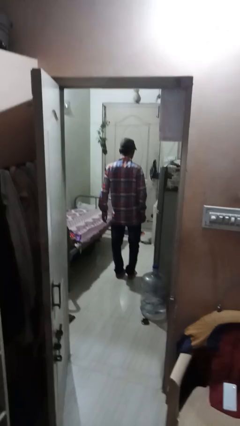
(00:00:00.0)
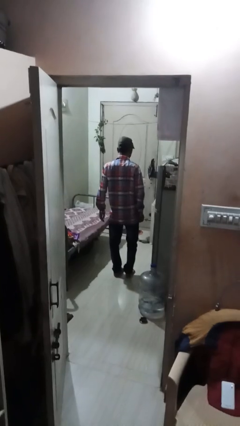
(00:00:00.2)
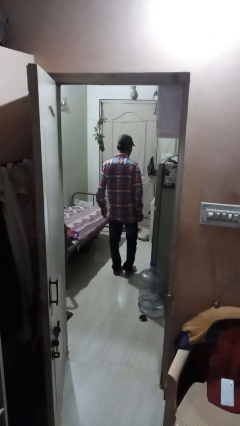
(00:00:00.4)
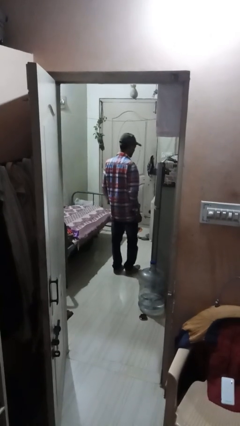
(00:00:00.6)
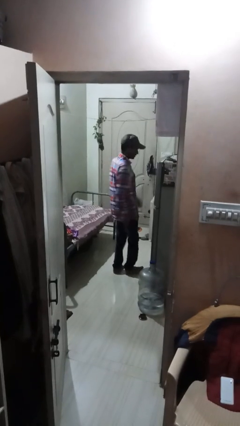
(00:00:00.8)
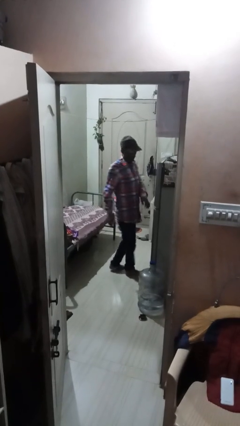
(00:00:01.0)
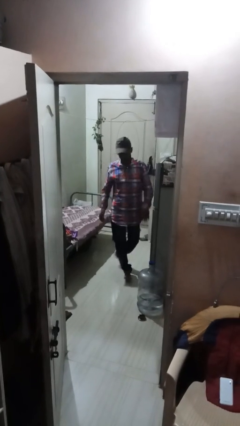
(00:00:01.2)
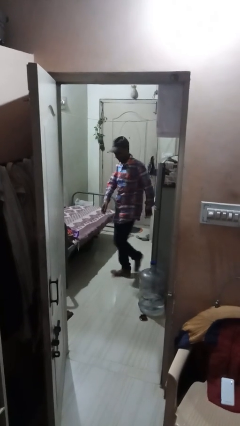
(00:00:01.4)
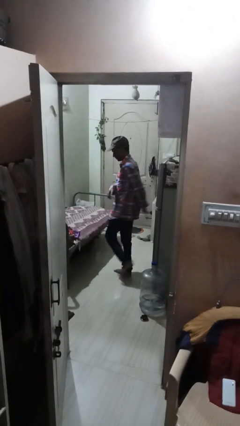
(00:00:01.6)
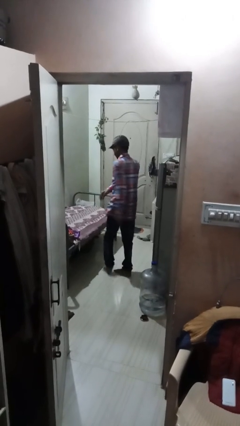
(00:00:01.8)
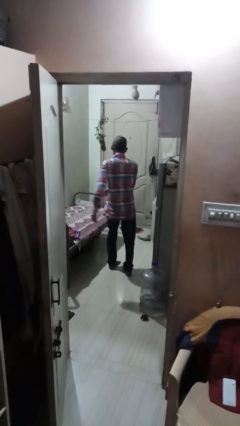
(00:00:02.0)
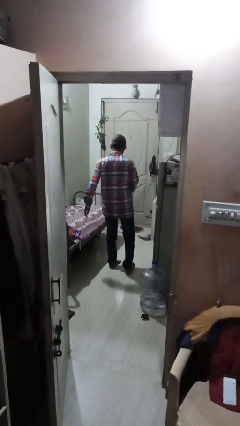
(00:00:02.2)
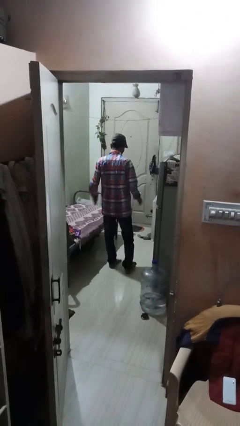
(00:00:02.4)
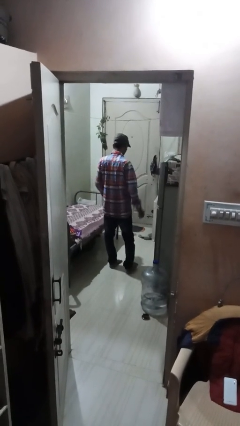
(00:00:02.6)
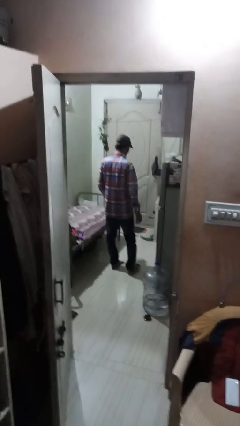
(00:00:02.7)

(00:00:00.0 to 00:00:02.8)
person twirls

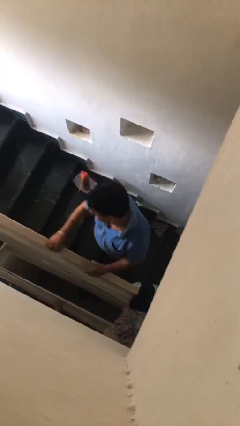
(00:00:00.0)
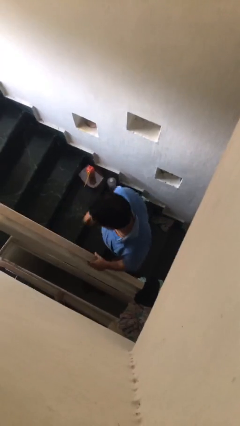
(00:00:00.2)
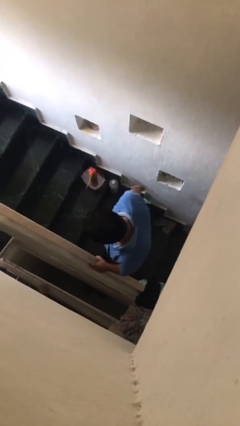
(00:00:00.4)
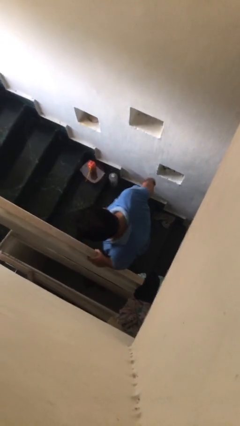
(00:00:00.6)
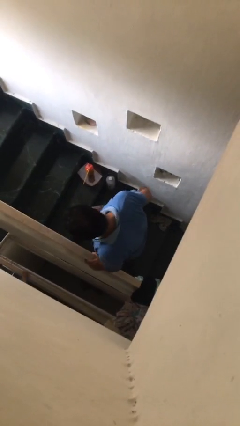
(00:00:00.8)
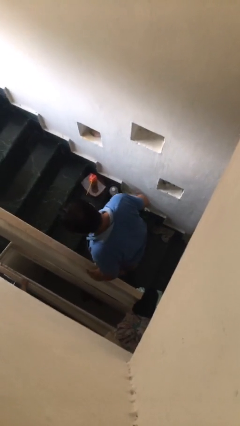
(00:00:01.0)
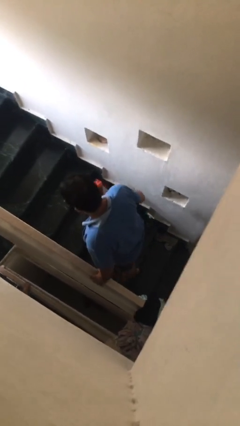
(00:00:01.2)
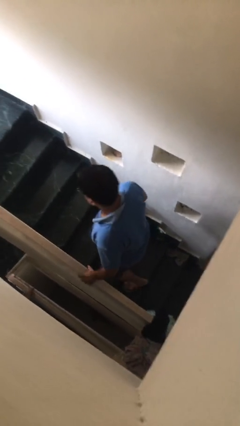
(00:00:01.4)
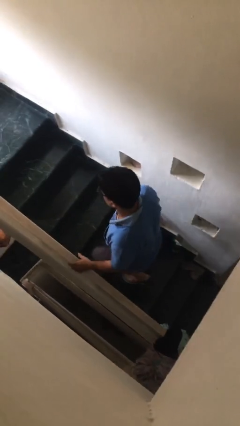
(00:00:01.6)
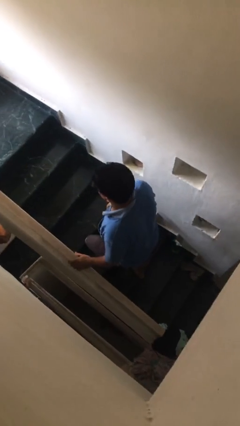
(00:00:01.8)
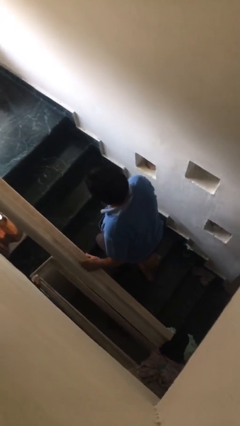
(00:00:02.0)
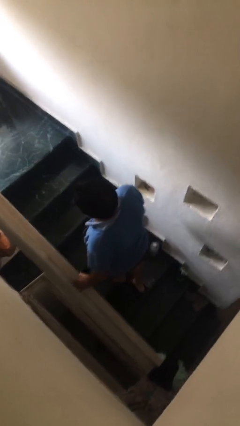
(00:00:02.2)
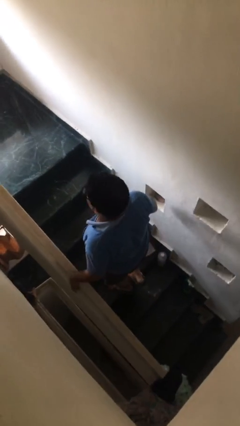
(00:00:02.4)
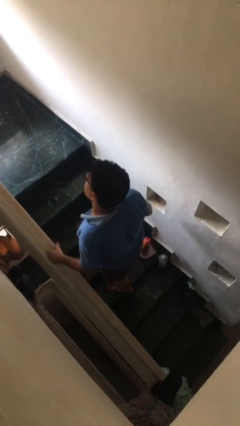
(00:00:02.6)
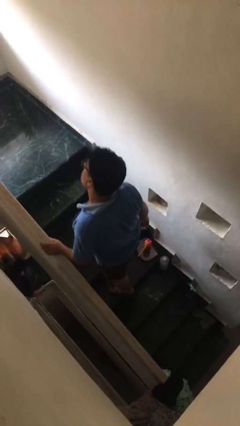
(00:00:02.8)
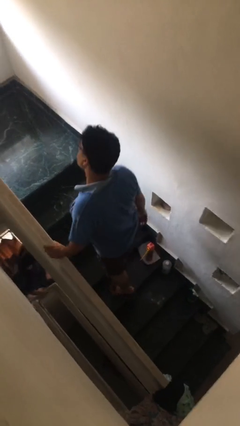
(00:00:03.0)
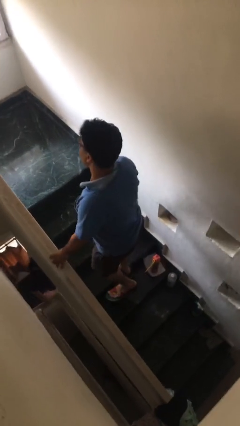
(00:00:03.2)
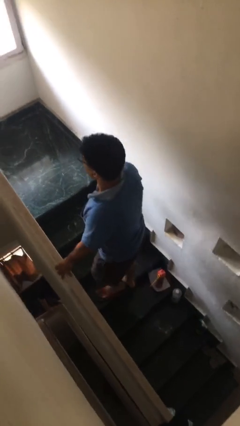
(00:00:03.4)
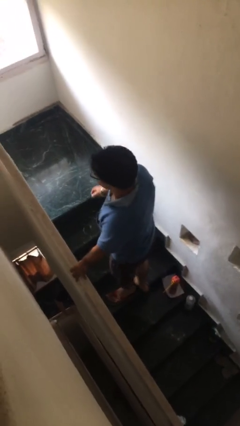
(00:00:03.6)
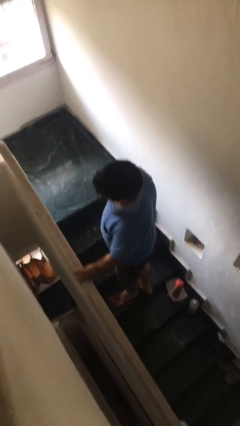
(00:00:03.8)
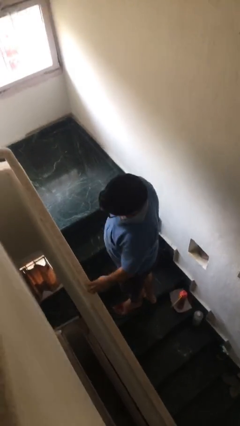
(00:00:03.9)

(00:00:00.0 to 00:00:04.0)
person climbs up stairs

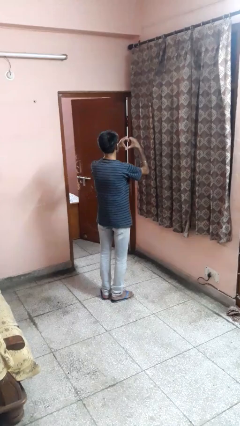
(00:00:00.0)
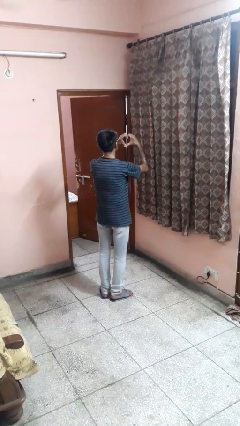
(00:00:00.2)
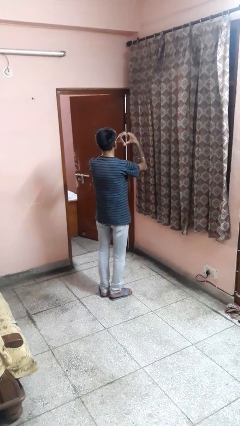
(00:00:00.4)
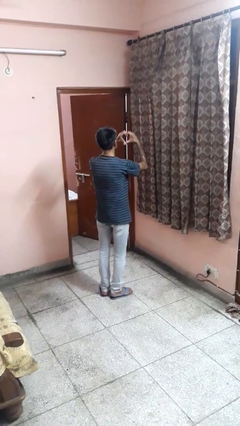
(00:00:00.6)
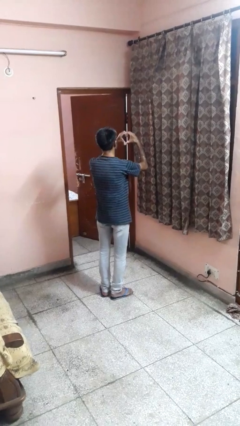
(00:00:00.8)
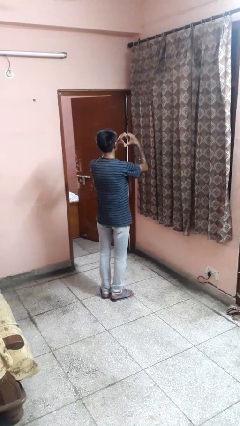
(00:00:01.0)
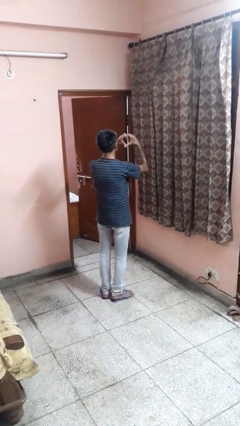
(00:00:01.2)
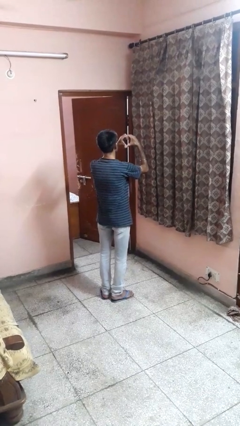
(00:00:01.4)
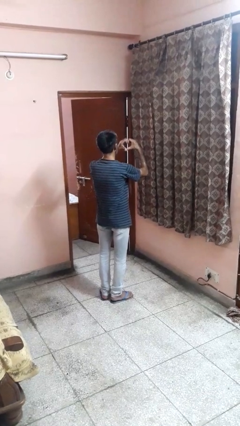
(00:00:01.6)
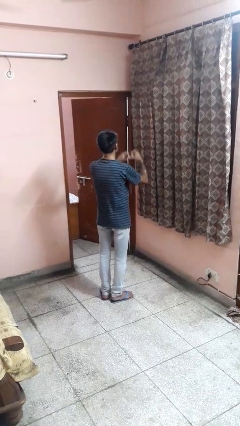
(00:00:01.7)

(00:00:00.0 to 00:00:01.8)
person gestures heart

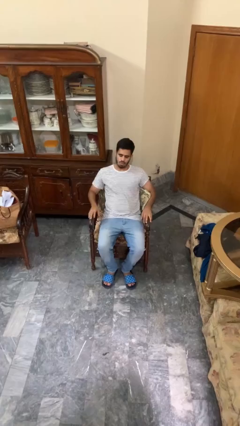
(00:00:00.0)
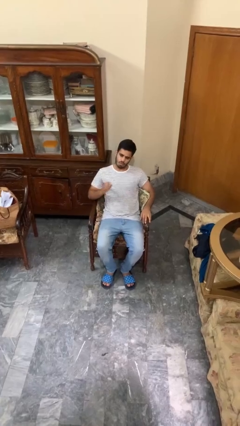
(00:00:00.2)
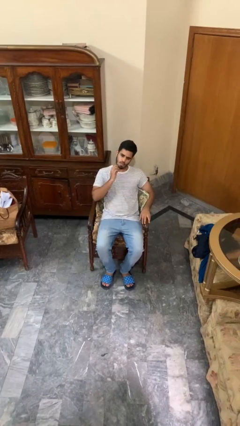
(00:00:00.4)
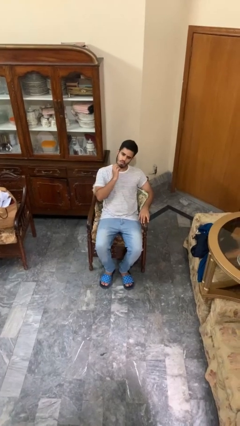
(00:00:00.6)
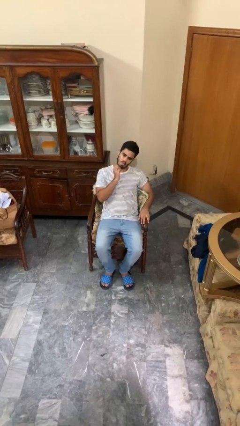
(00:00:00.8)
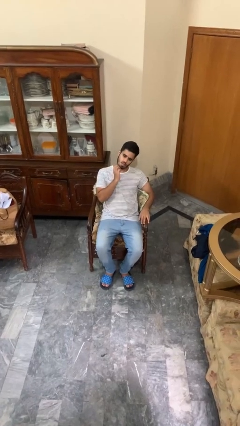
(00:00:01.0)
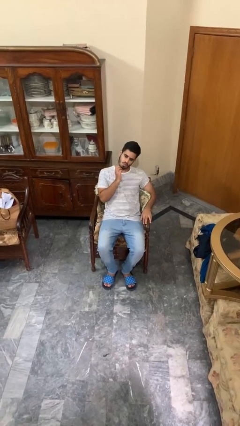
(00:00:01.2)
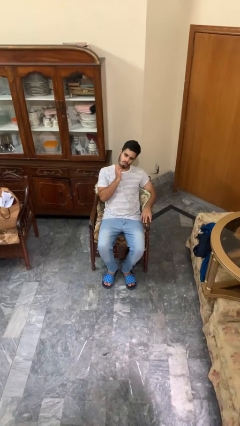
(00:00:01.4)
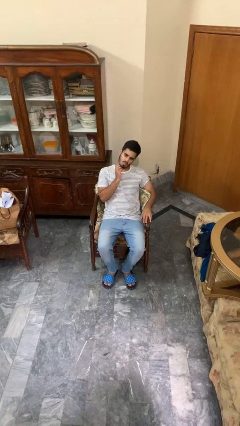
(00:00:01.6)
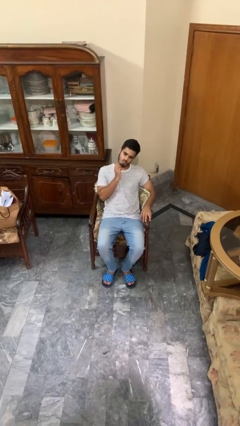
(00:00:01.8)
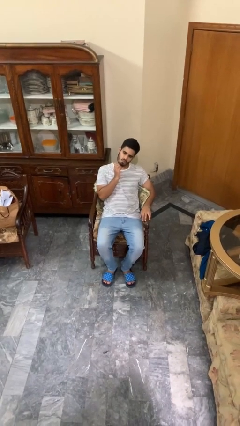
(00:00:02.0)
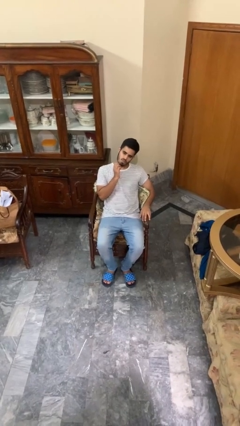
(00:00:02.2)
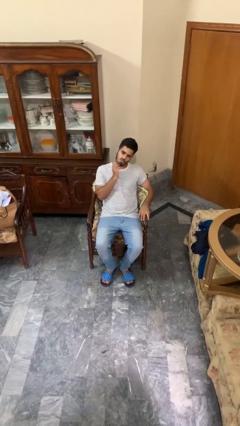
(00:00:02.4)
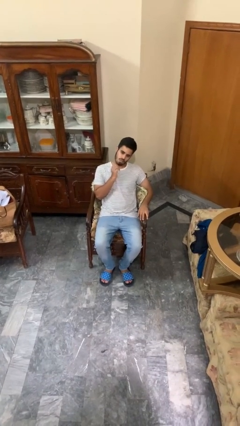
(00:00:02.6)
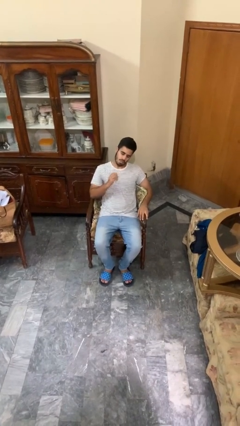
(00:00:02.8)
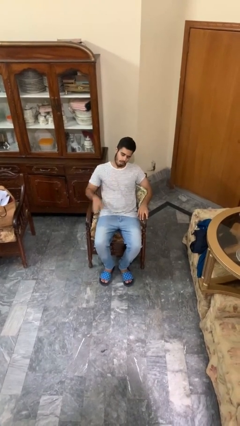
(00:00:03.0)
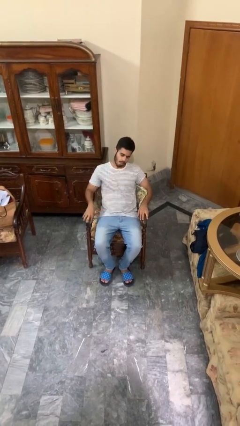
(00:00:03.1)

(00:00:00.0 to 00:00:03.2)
person strokes chin

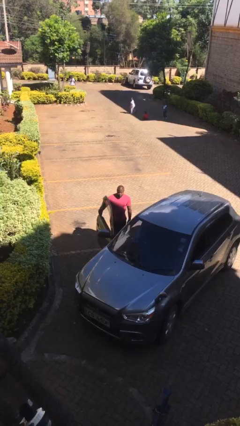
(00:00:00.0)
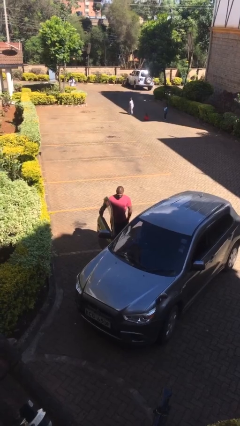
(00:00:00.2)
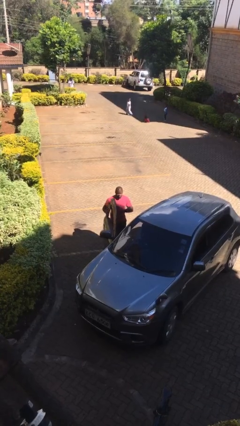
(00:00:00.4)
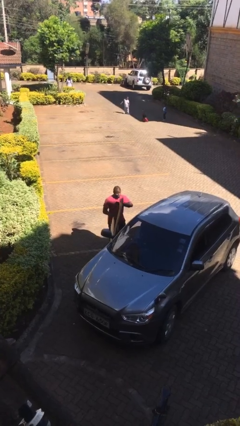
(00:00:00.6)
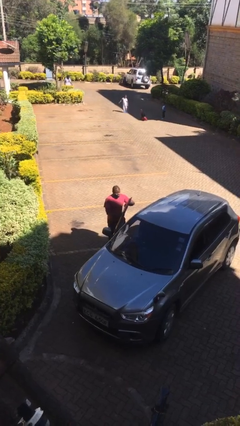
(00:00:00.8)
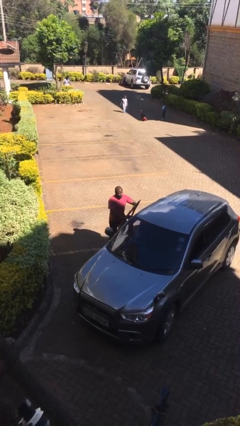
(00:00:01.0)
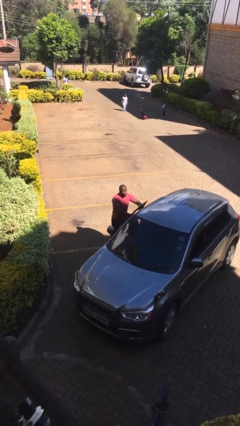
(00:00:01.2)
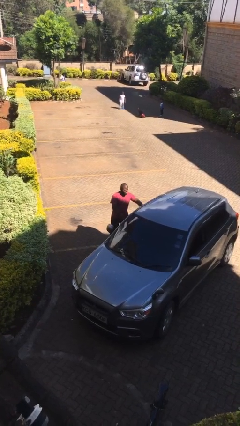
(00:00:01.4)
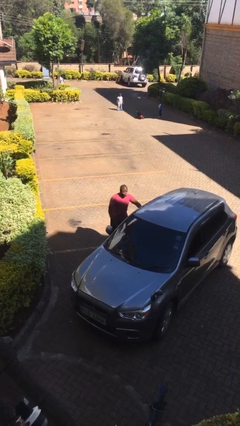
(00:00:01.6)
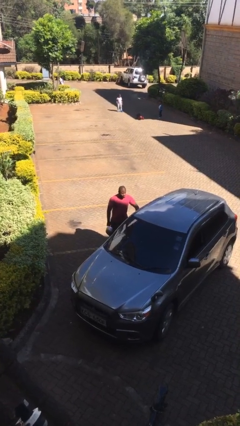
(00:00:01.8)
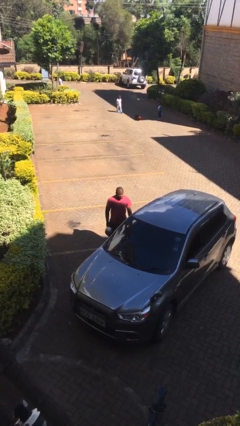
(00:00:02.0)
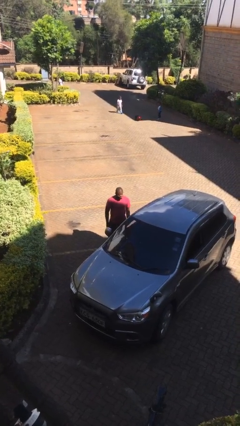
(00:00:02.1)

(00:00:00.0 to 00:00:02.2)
person closes car door

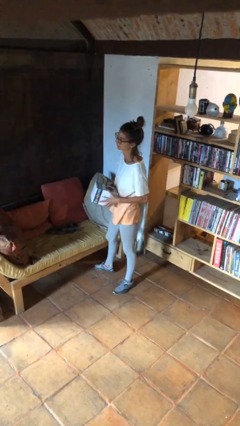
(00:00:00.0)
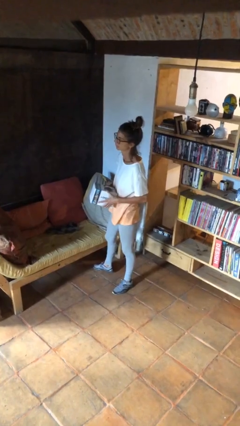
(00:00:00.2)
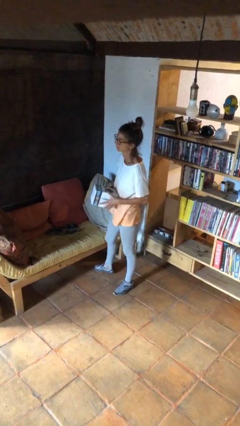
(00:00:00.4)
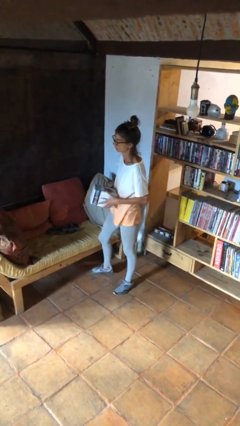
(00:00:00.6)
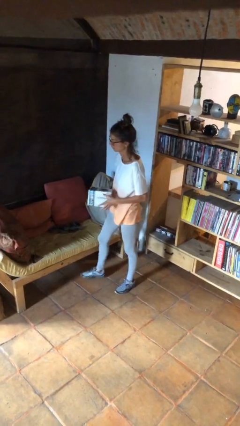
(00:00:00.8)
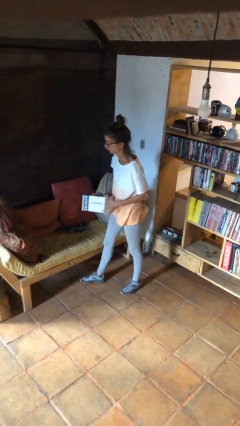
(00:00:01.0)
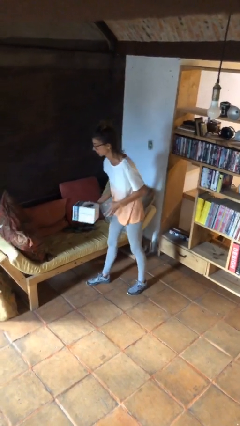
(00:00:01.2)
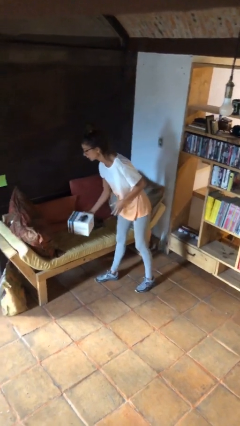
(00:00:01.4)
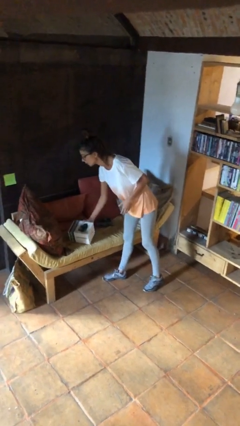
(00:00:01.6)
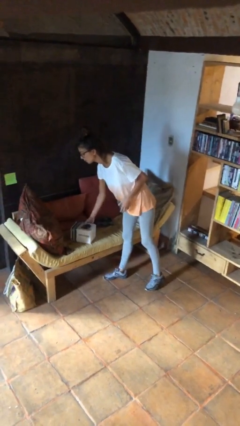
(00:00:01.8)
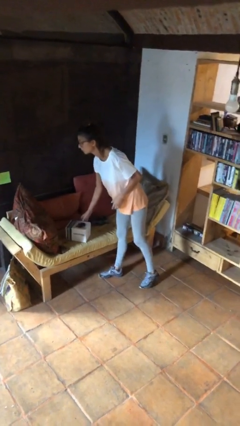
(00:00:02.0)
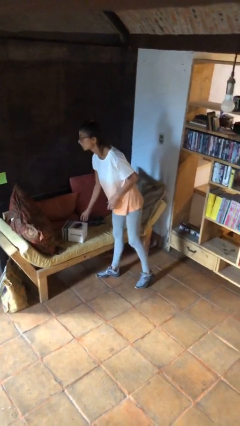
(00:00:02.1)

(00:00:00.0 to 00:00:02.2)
person puts down object on couch

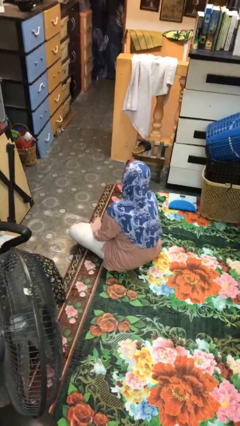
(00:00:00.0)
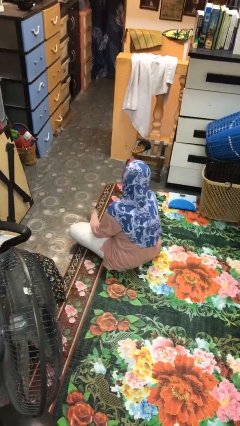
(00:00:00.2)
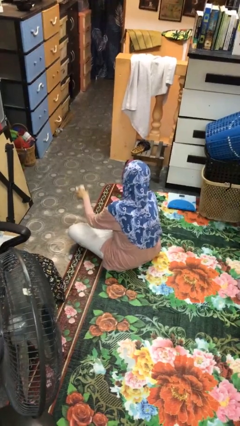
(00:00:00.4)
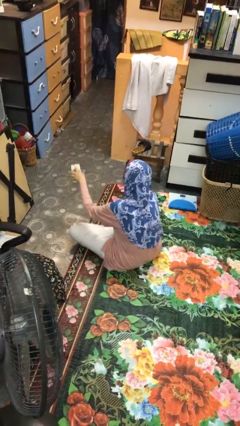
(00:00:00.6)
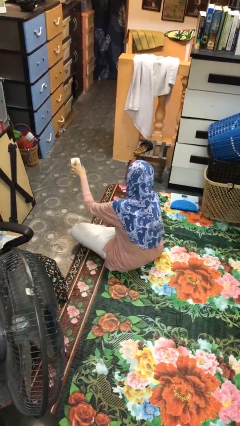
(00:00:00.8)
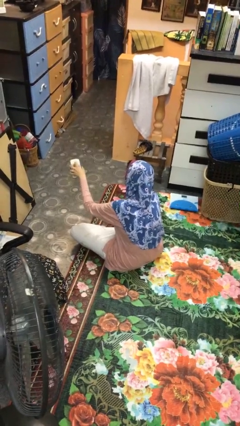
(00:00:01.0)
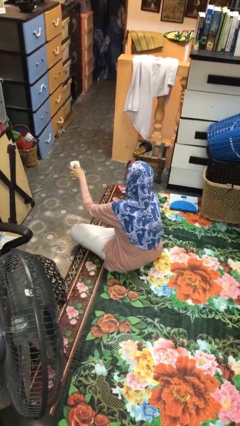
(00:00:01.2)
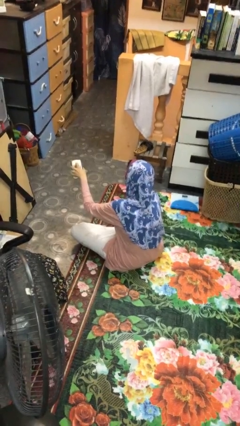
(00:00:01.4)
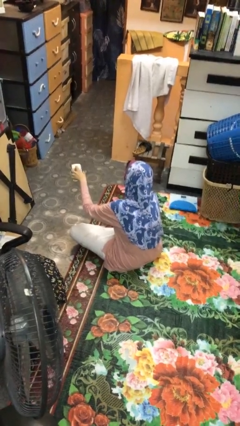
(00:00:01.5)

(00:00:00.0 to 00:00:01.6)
person uses television remote
